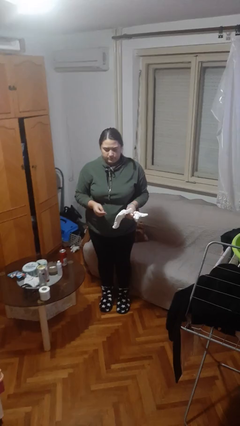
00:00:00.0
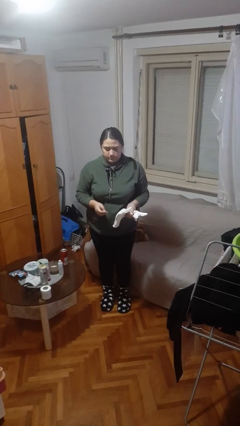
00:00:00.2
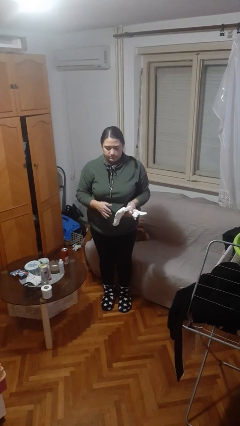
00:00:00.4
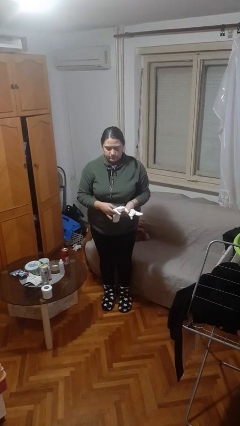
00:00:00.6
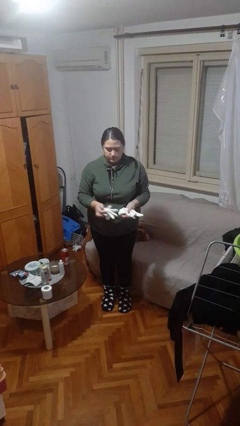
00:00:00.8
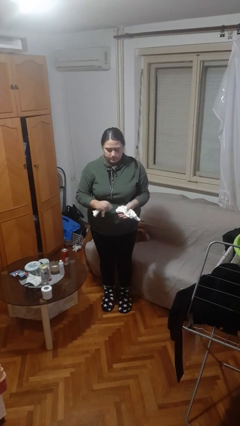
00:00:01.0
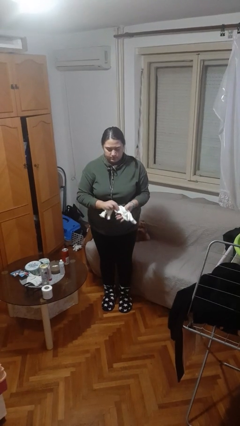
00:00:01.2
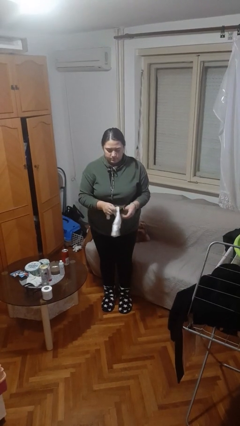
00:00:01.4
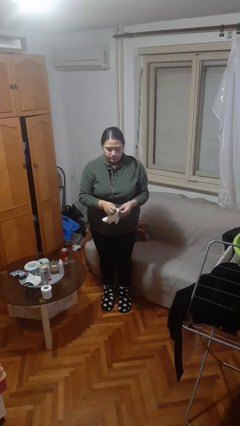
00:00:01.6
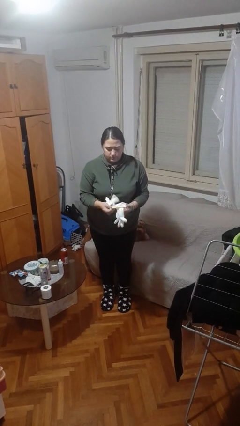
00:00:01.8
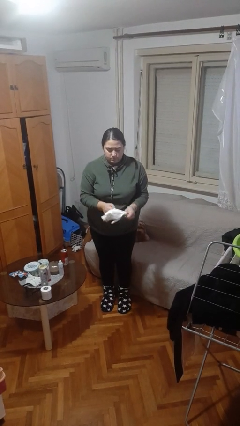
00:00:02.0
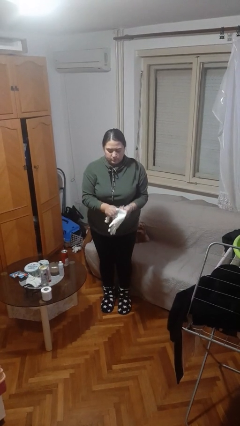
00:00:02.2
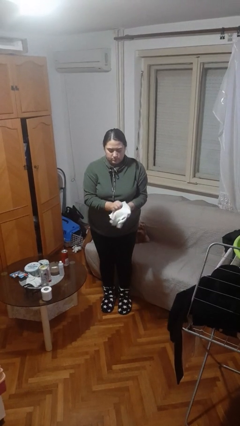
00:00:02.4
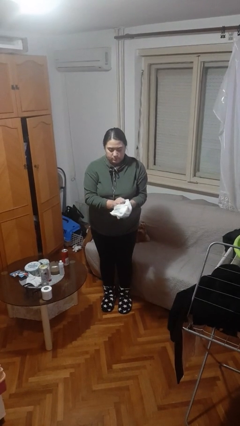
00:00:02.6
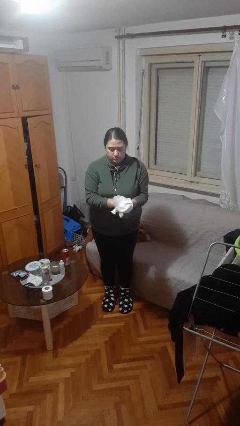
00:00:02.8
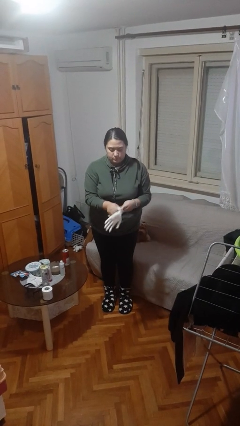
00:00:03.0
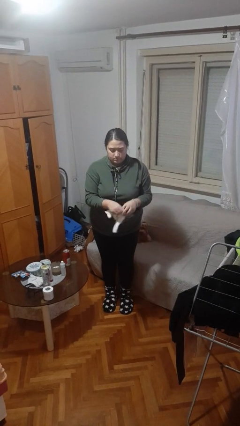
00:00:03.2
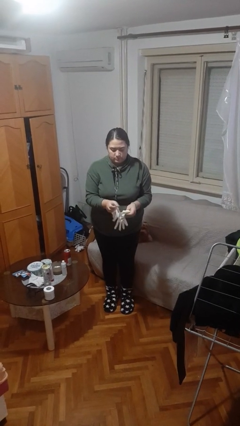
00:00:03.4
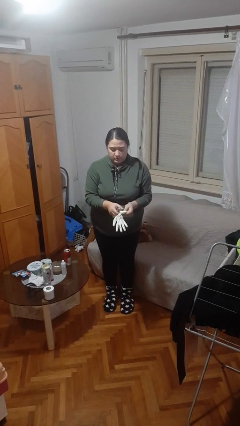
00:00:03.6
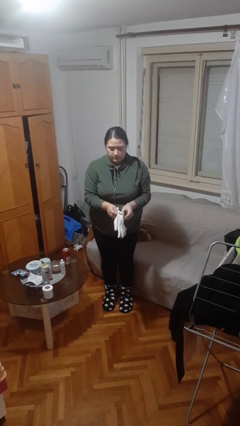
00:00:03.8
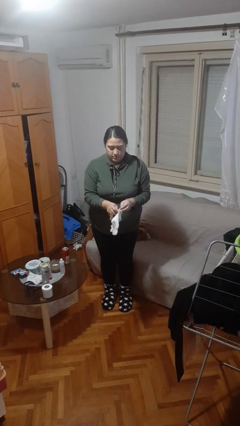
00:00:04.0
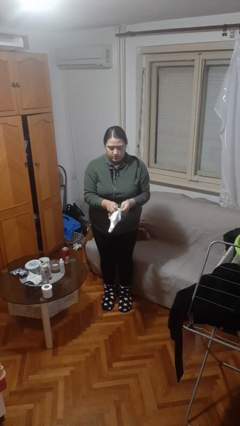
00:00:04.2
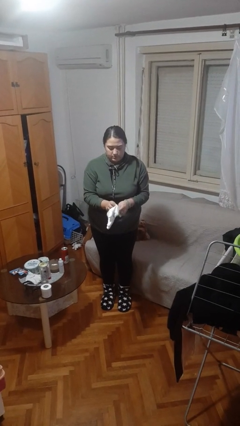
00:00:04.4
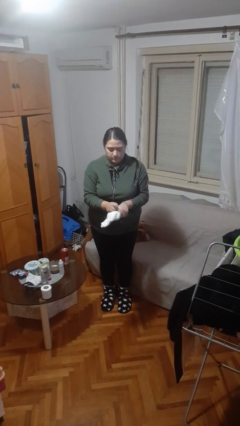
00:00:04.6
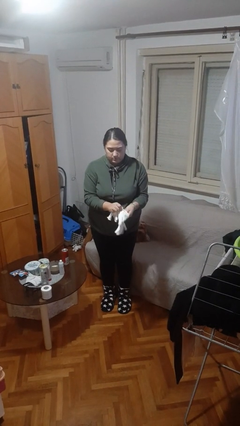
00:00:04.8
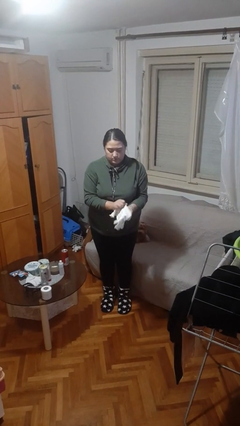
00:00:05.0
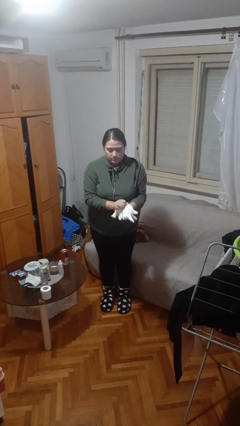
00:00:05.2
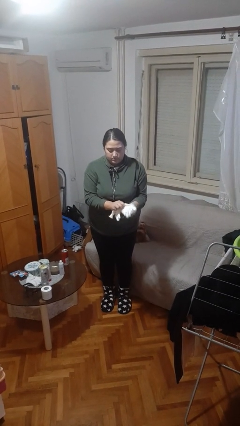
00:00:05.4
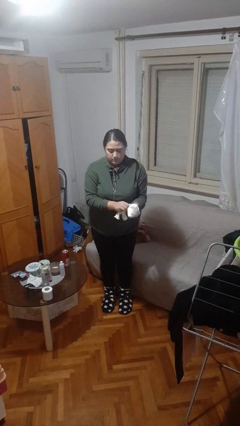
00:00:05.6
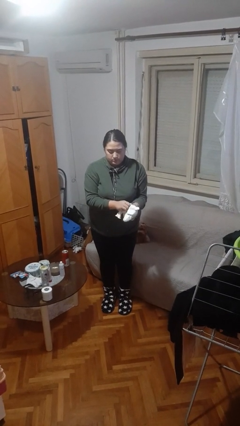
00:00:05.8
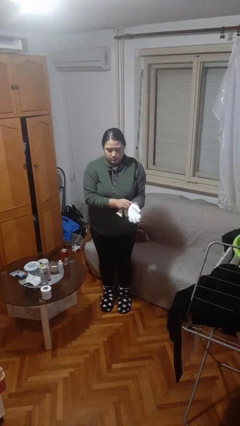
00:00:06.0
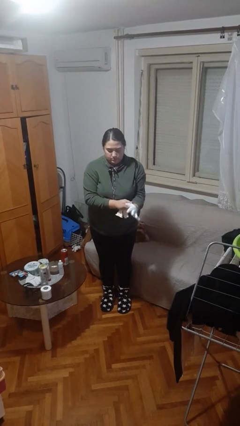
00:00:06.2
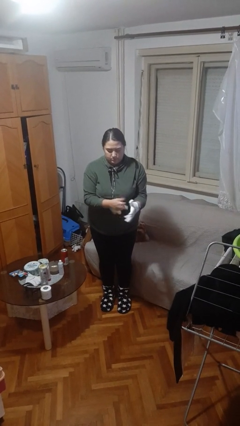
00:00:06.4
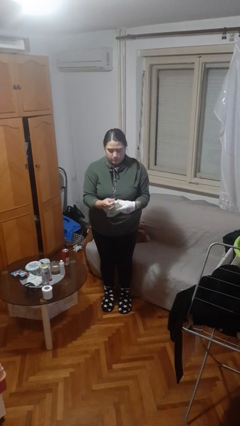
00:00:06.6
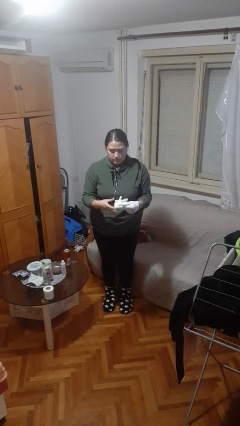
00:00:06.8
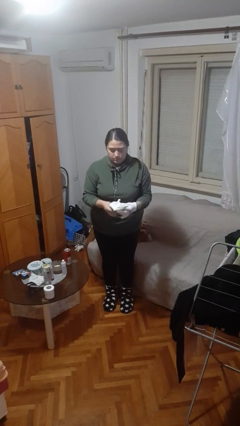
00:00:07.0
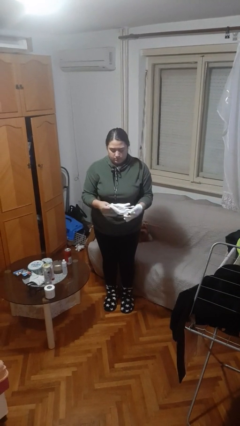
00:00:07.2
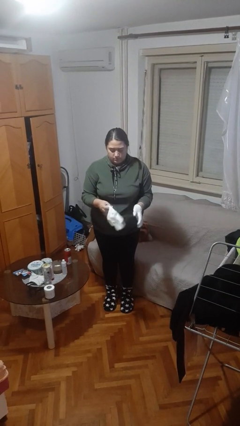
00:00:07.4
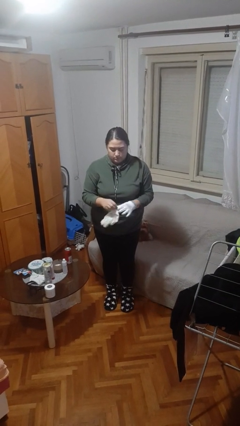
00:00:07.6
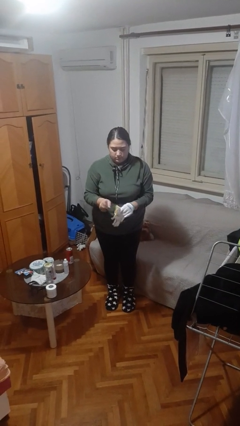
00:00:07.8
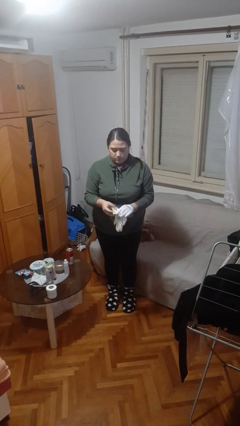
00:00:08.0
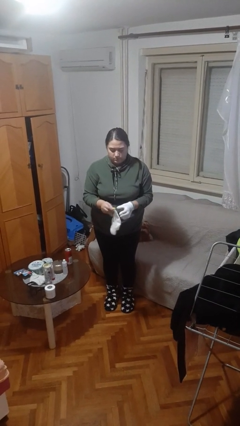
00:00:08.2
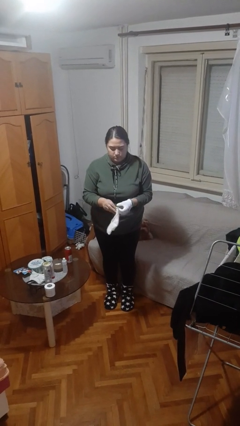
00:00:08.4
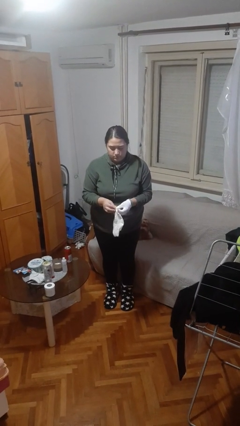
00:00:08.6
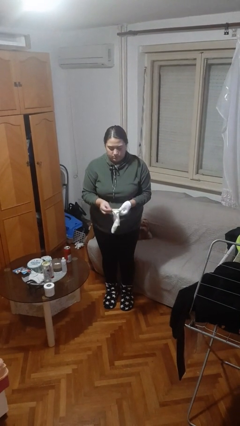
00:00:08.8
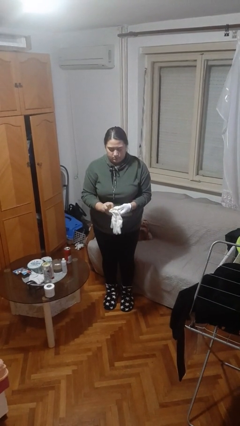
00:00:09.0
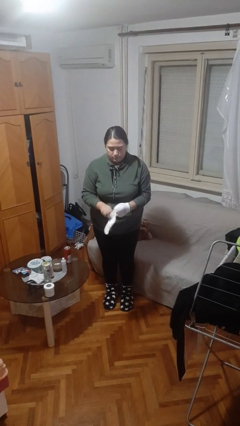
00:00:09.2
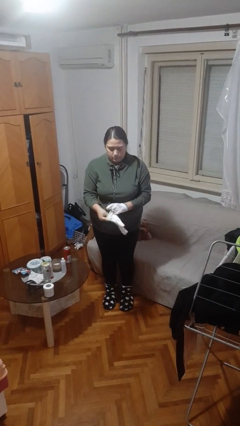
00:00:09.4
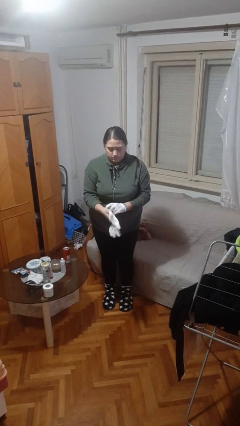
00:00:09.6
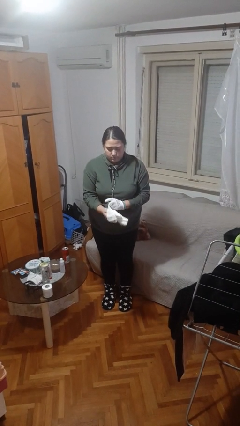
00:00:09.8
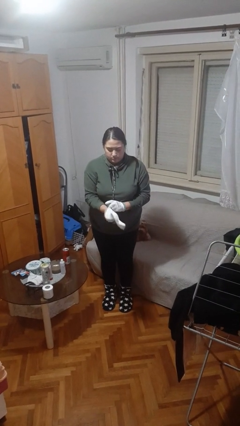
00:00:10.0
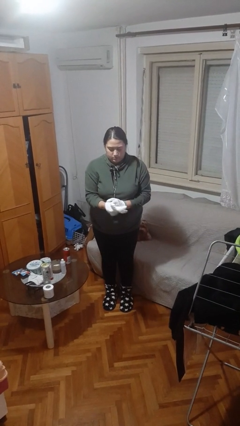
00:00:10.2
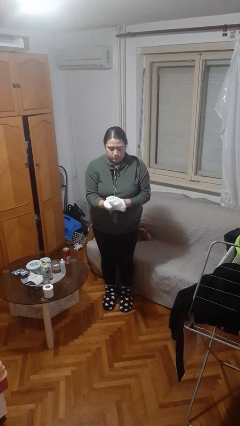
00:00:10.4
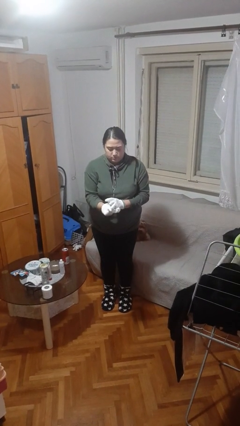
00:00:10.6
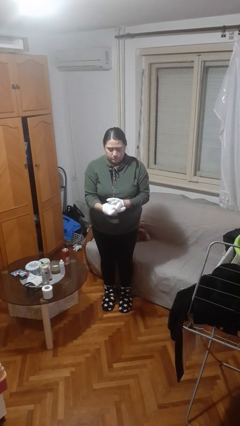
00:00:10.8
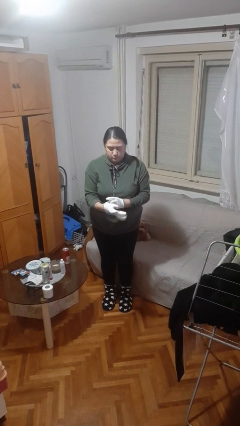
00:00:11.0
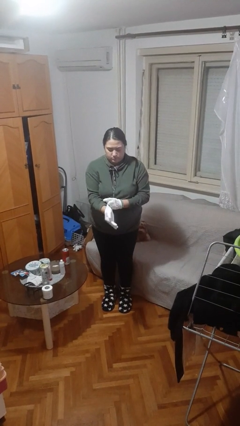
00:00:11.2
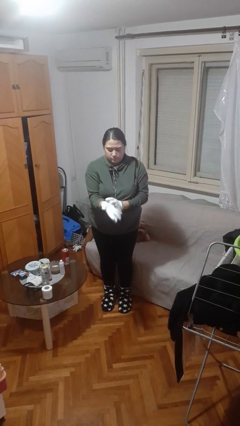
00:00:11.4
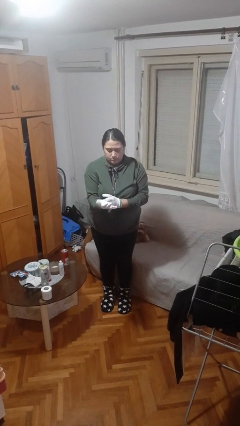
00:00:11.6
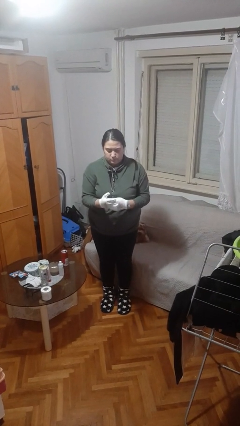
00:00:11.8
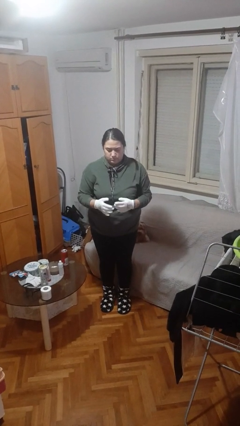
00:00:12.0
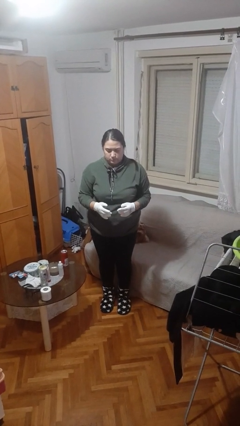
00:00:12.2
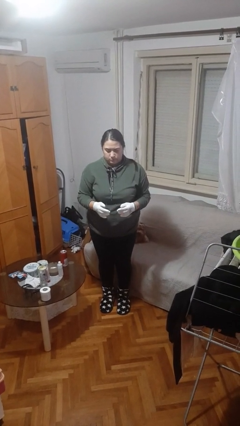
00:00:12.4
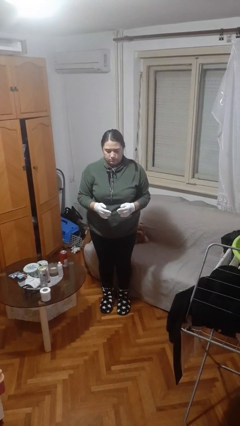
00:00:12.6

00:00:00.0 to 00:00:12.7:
person puts on gloves

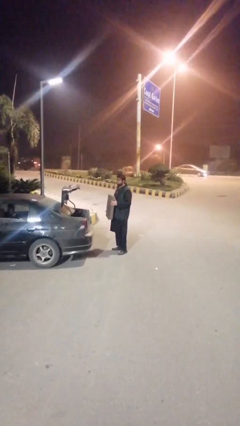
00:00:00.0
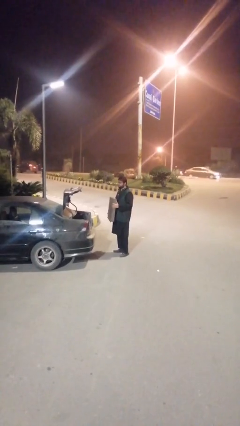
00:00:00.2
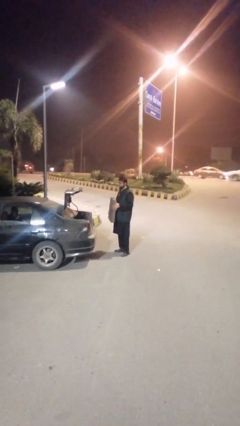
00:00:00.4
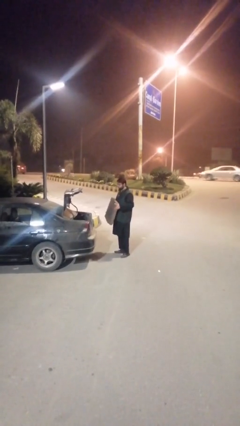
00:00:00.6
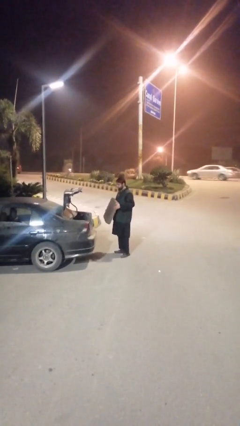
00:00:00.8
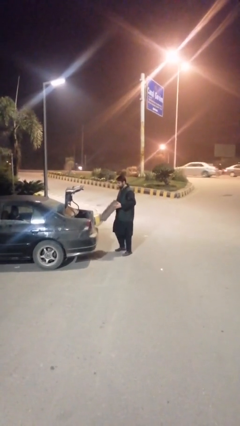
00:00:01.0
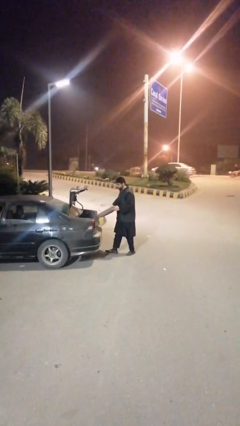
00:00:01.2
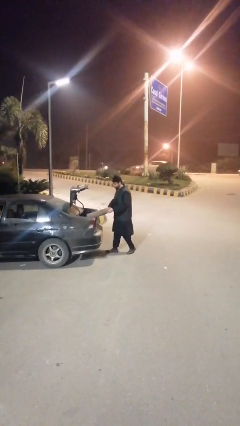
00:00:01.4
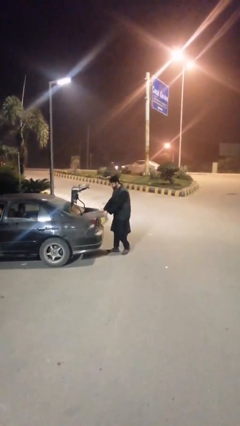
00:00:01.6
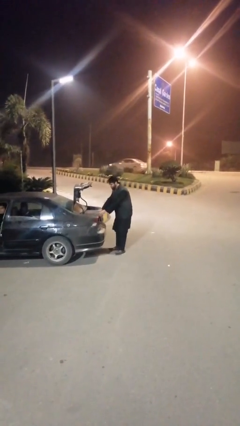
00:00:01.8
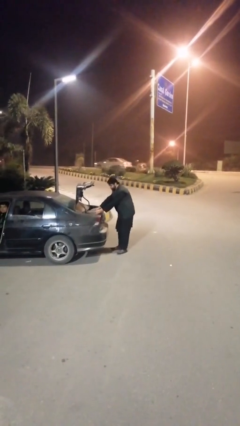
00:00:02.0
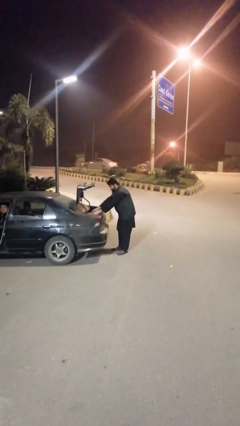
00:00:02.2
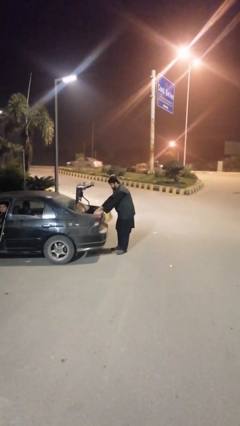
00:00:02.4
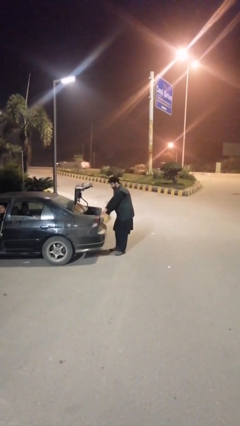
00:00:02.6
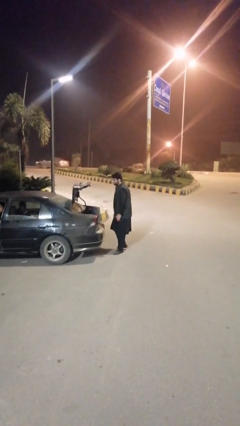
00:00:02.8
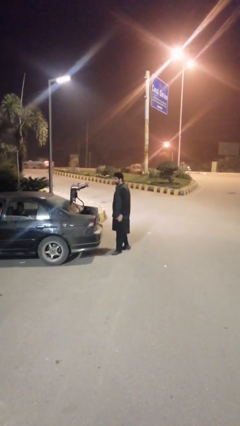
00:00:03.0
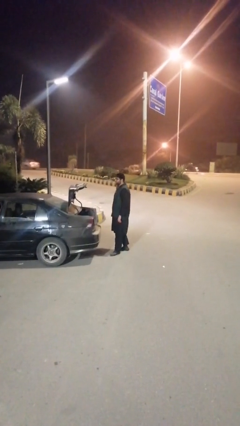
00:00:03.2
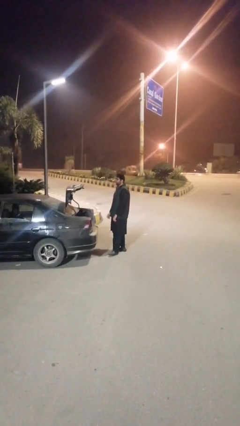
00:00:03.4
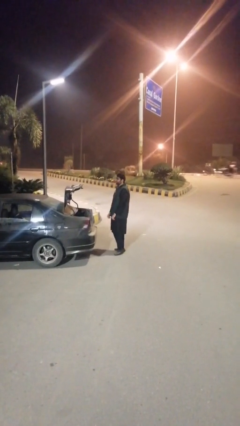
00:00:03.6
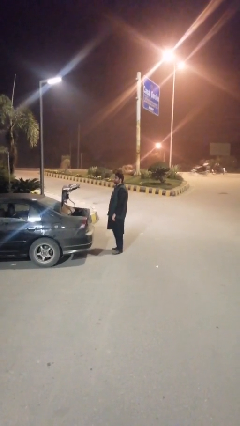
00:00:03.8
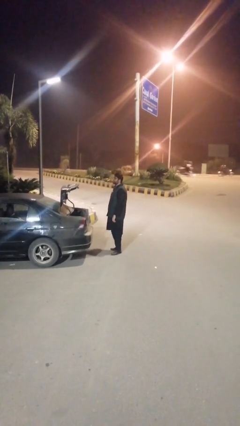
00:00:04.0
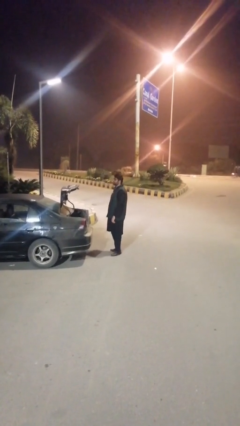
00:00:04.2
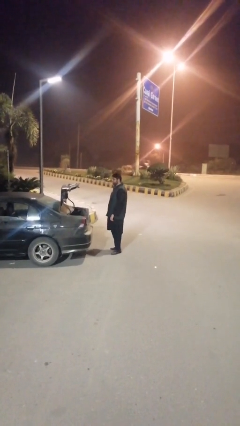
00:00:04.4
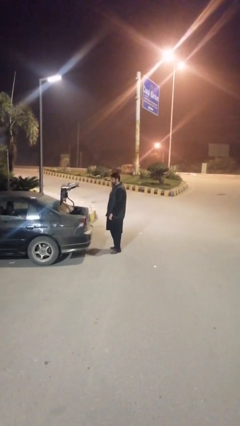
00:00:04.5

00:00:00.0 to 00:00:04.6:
person loads car

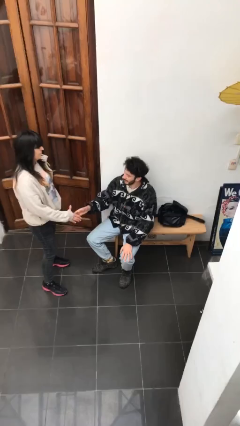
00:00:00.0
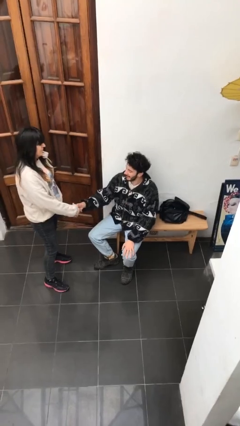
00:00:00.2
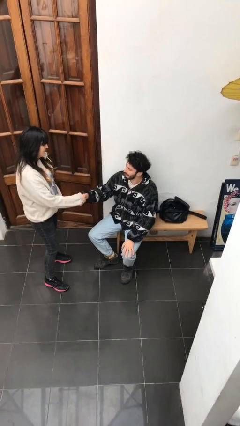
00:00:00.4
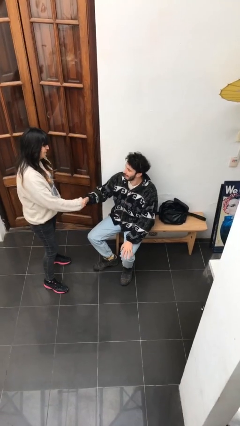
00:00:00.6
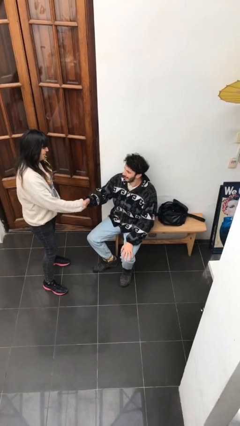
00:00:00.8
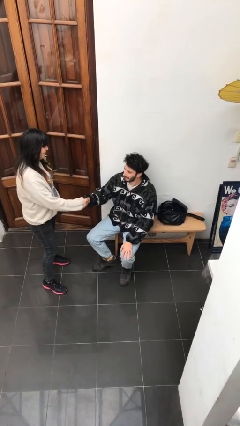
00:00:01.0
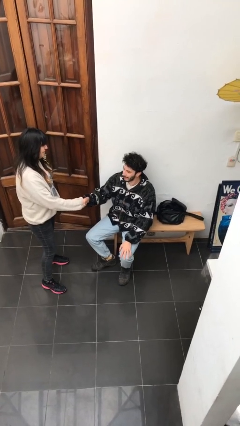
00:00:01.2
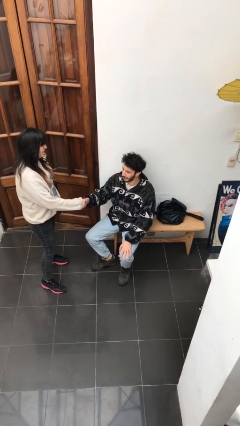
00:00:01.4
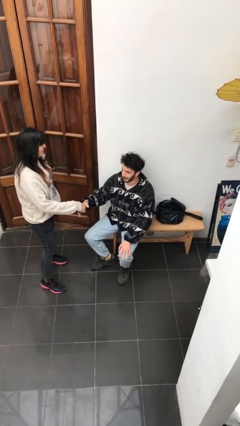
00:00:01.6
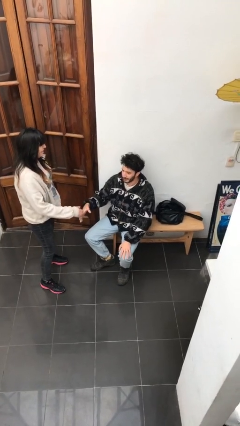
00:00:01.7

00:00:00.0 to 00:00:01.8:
person shakes hand
